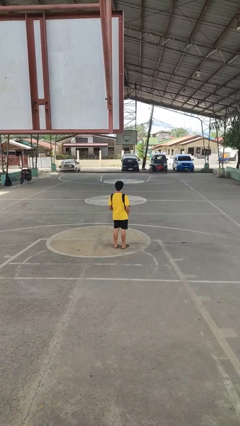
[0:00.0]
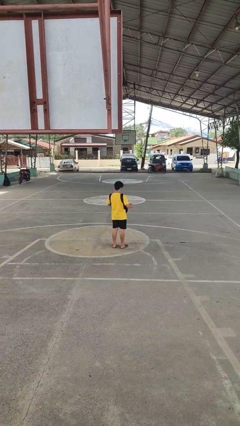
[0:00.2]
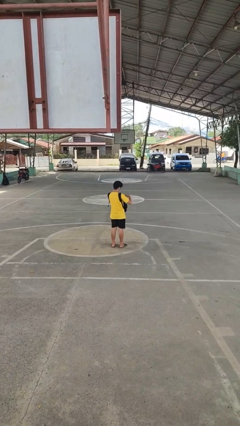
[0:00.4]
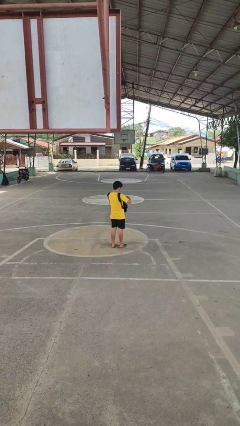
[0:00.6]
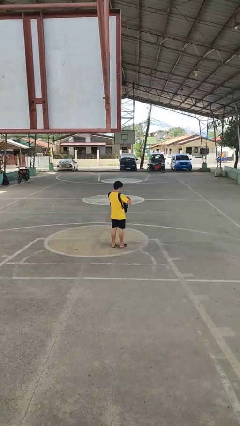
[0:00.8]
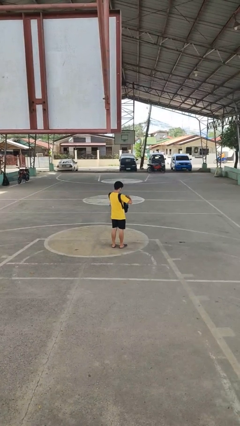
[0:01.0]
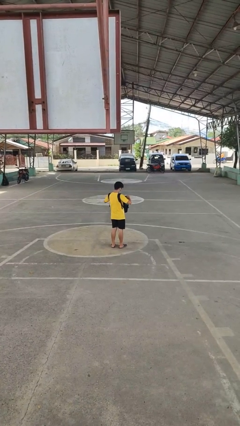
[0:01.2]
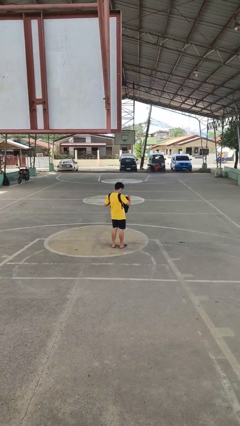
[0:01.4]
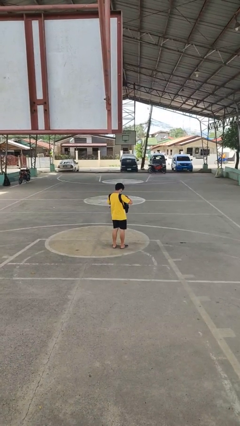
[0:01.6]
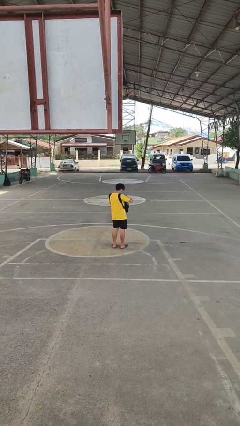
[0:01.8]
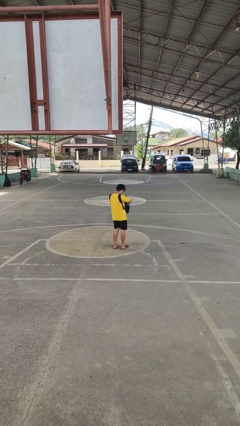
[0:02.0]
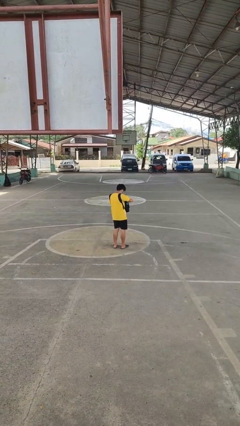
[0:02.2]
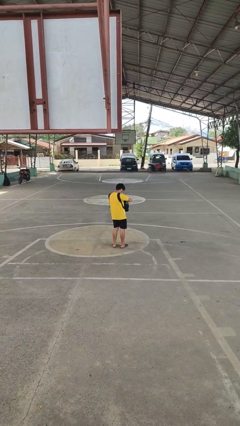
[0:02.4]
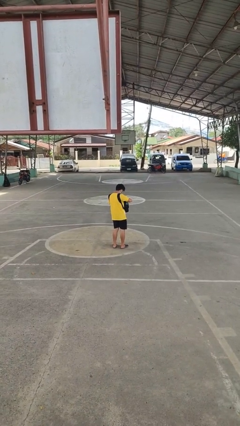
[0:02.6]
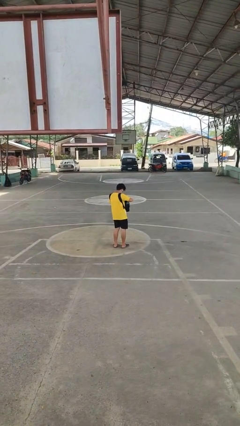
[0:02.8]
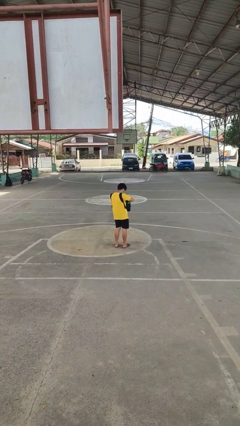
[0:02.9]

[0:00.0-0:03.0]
person searches in backpack

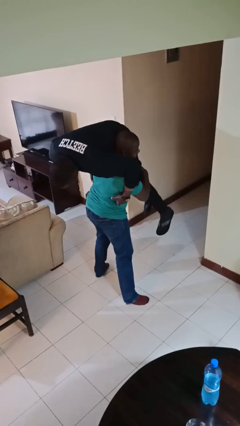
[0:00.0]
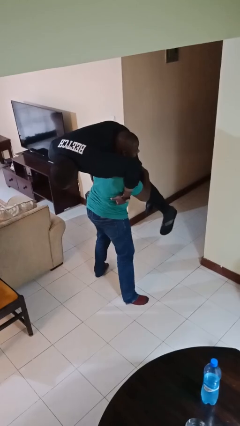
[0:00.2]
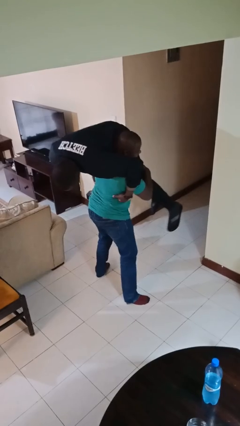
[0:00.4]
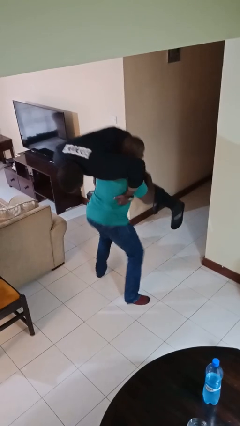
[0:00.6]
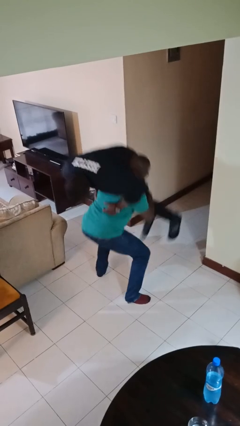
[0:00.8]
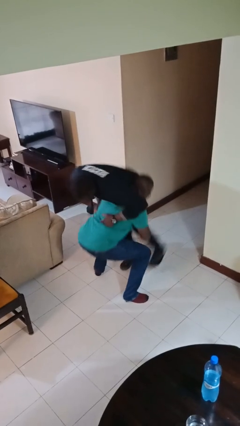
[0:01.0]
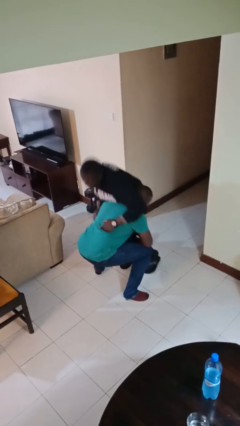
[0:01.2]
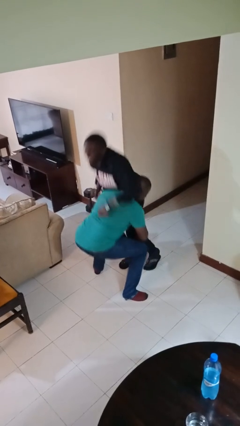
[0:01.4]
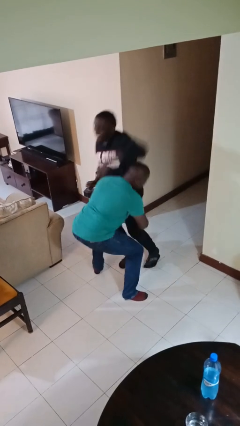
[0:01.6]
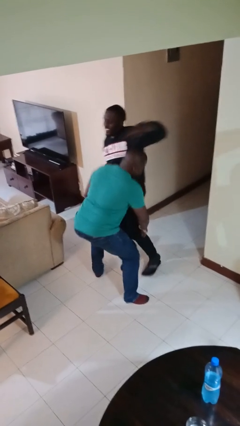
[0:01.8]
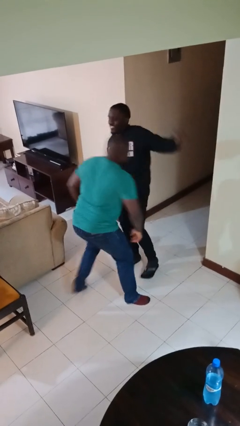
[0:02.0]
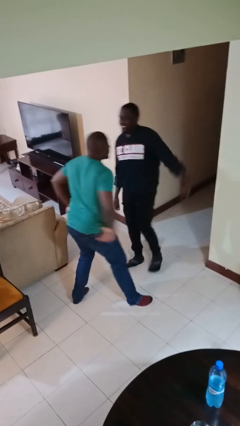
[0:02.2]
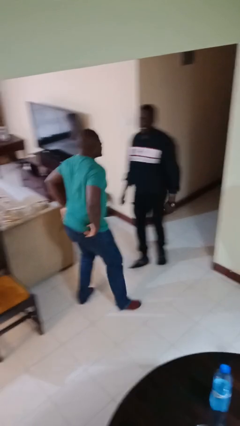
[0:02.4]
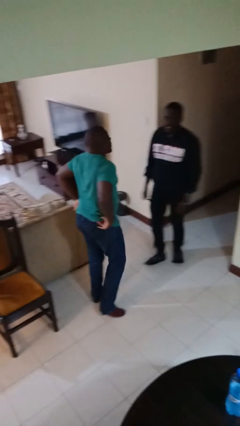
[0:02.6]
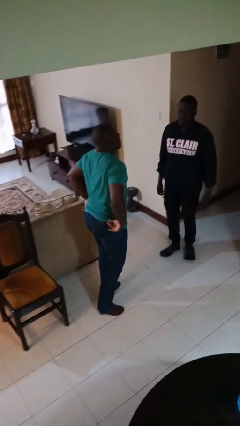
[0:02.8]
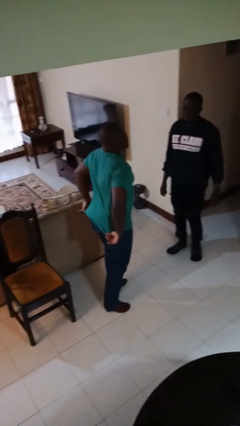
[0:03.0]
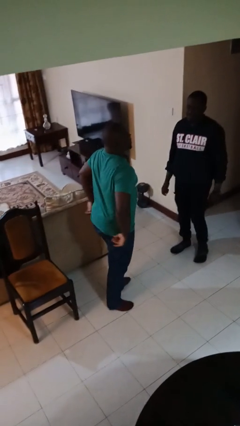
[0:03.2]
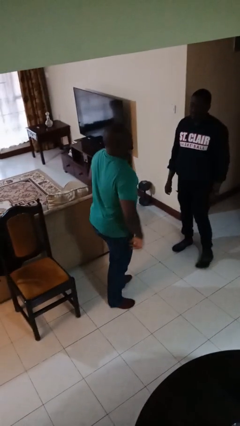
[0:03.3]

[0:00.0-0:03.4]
person puts down person

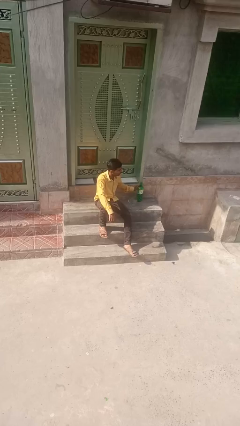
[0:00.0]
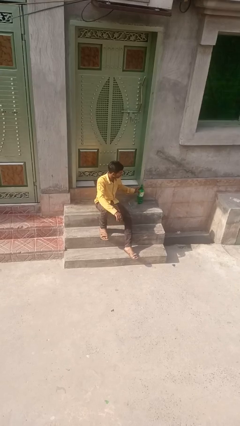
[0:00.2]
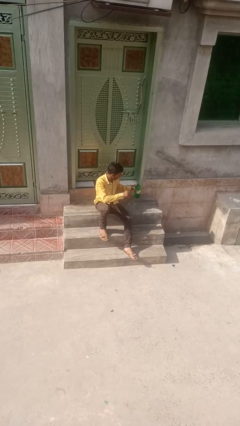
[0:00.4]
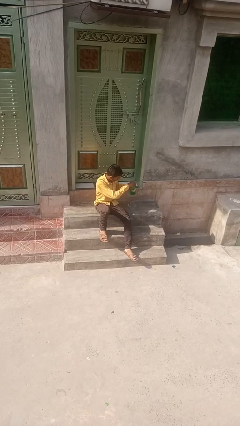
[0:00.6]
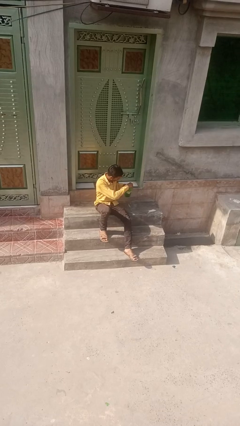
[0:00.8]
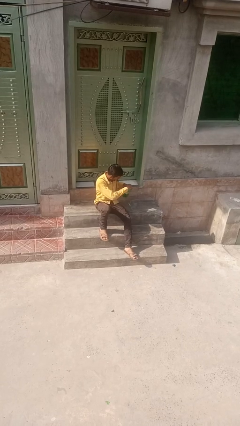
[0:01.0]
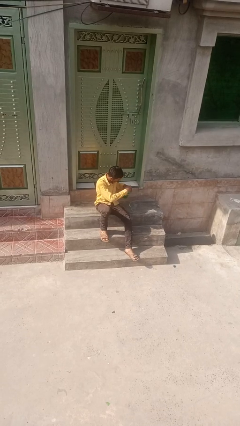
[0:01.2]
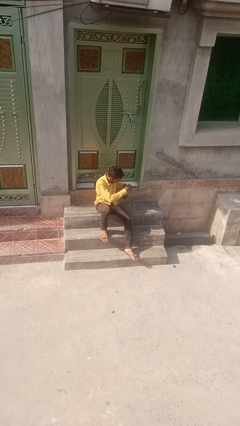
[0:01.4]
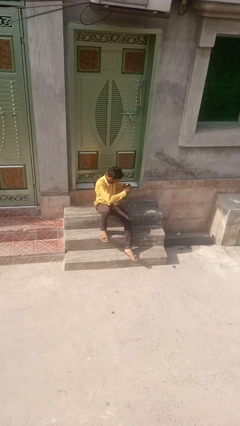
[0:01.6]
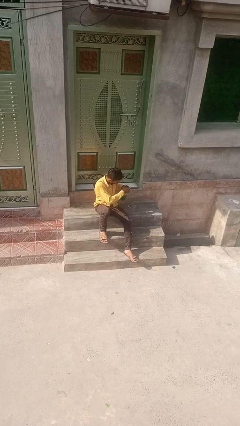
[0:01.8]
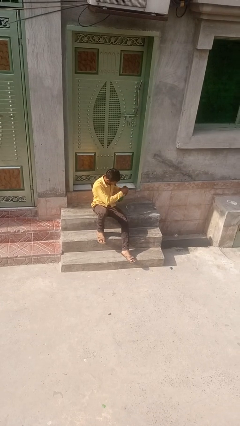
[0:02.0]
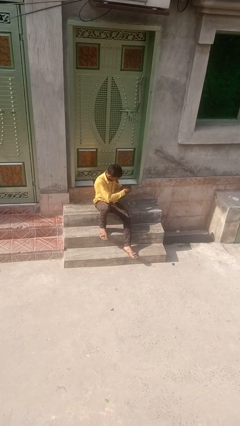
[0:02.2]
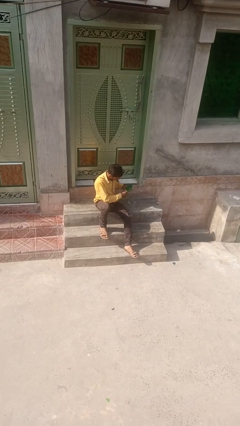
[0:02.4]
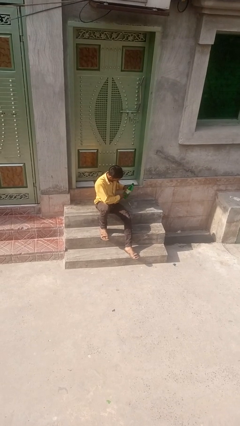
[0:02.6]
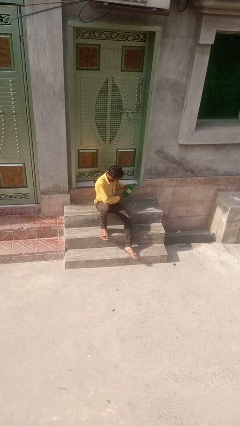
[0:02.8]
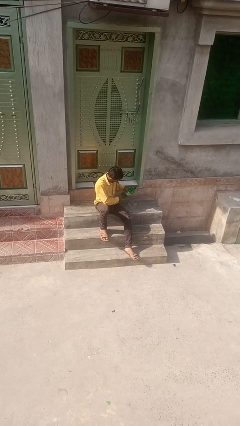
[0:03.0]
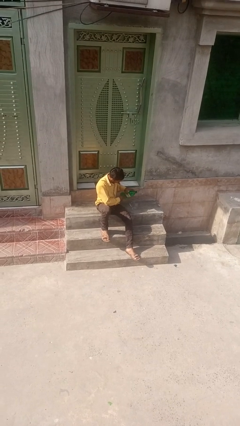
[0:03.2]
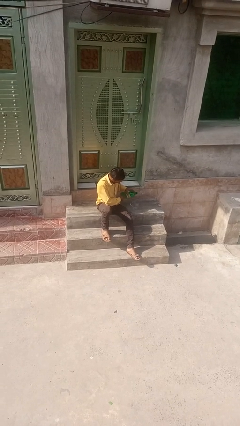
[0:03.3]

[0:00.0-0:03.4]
person unscrews lid from bottle

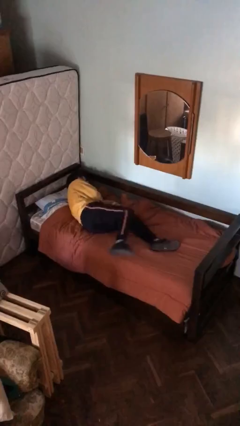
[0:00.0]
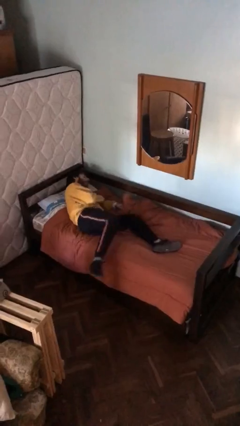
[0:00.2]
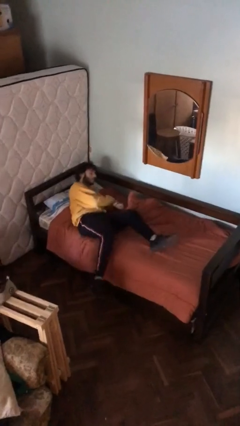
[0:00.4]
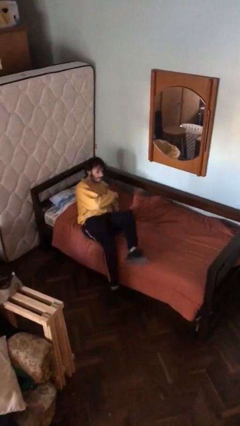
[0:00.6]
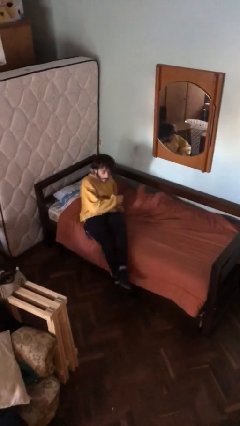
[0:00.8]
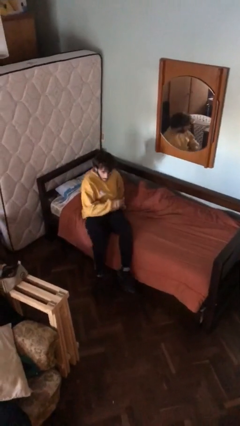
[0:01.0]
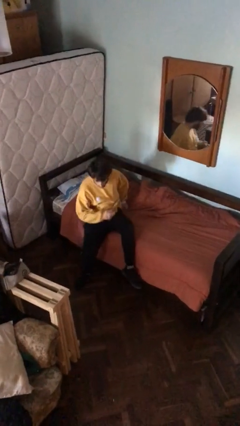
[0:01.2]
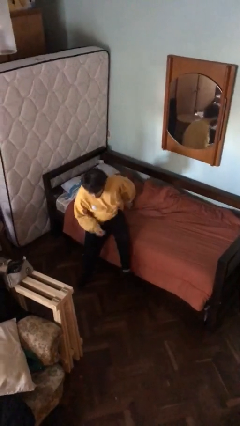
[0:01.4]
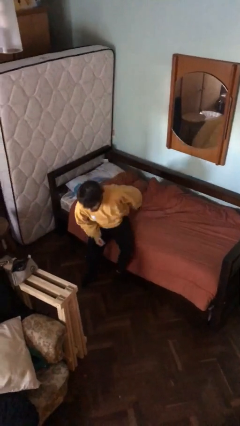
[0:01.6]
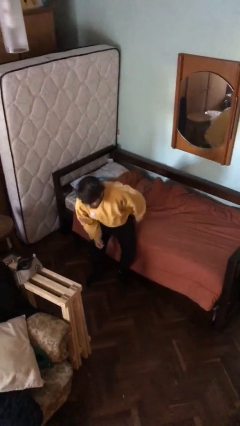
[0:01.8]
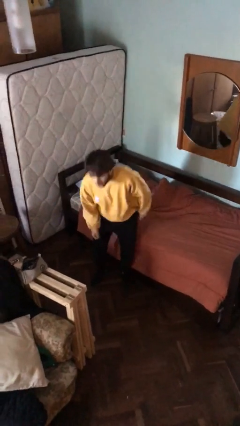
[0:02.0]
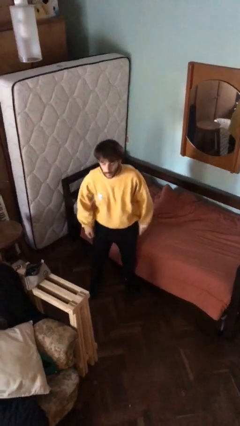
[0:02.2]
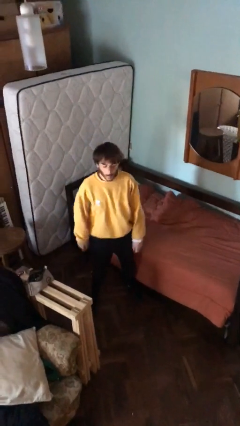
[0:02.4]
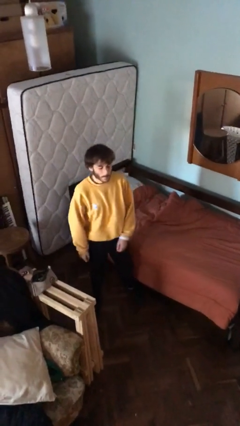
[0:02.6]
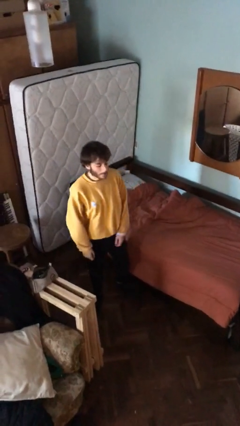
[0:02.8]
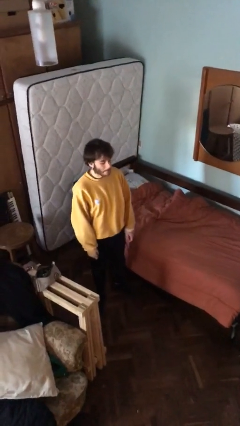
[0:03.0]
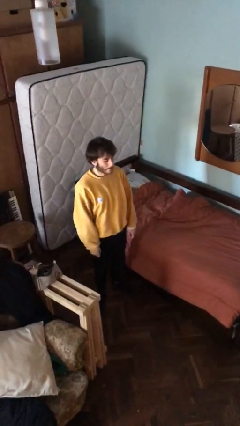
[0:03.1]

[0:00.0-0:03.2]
person stands up

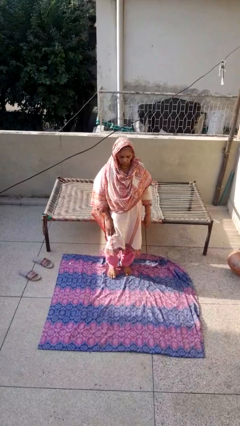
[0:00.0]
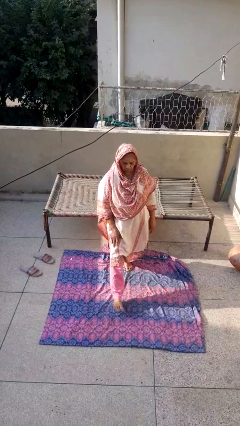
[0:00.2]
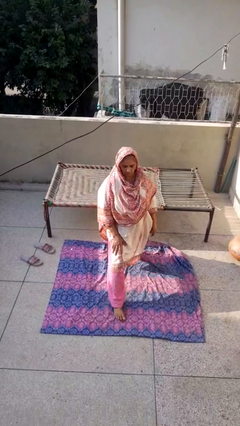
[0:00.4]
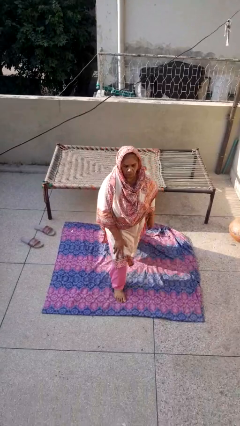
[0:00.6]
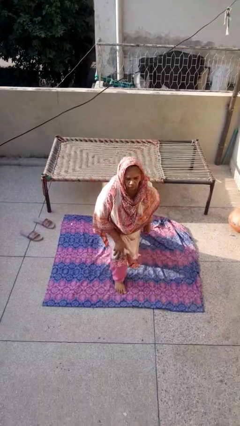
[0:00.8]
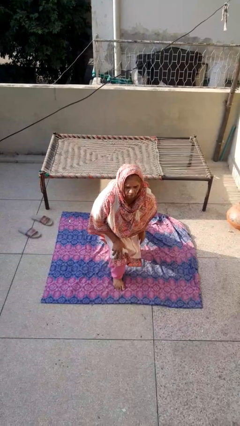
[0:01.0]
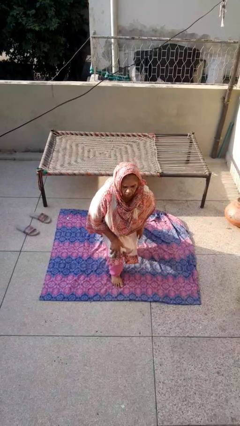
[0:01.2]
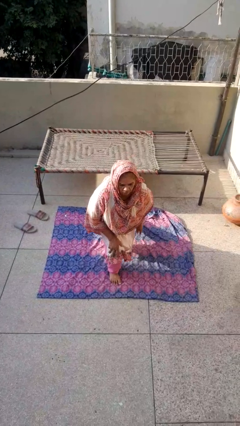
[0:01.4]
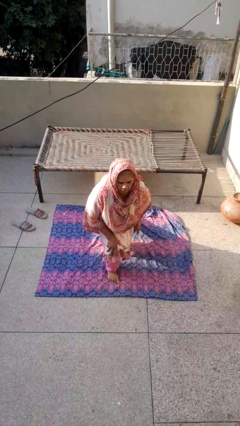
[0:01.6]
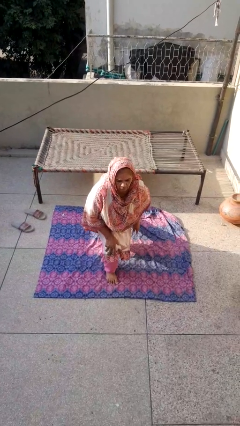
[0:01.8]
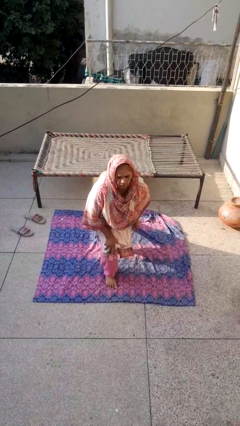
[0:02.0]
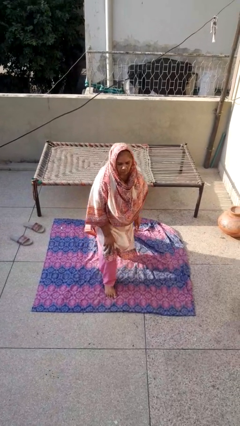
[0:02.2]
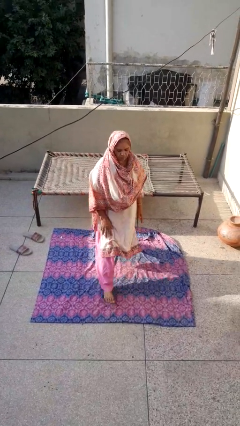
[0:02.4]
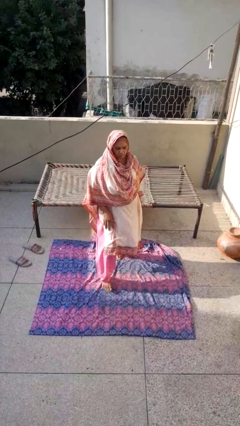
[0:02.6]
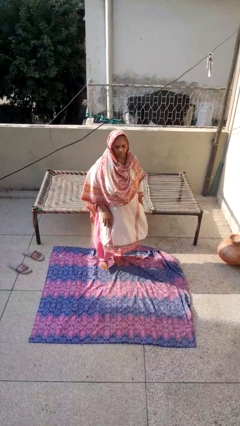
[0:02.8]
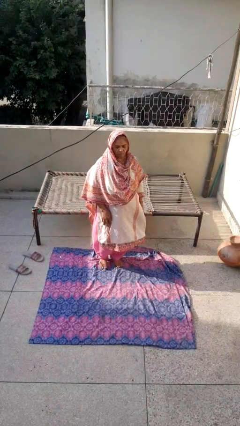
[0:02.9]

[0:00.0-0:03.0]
person exercises with lunges

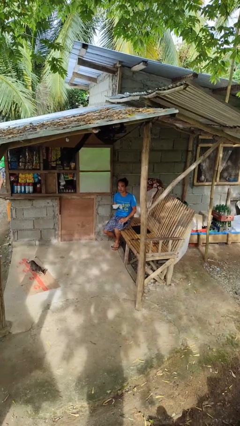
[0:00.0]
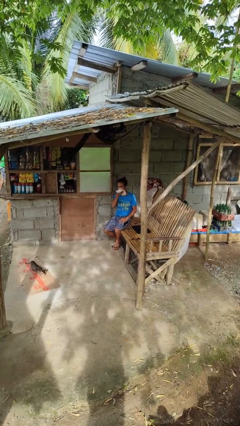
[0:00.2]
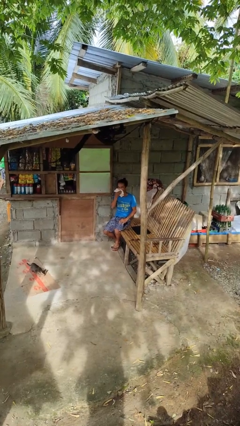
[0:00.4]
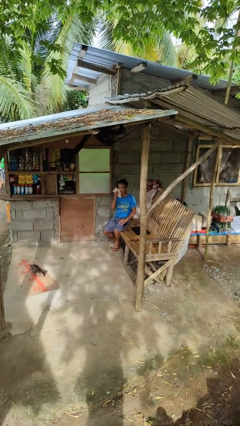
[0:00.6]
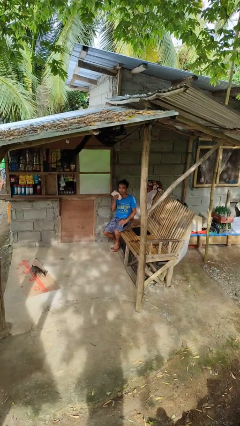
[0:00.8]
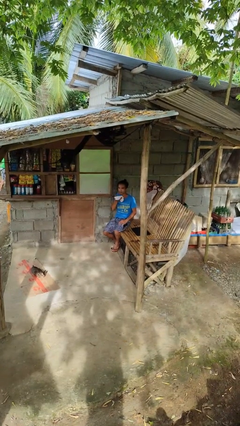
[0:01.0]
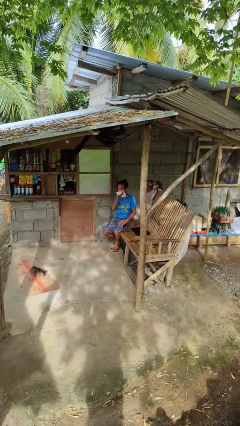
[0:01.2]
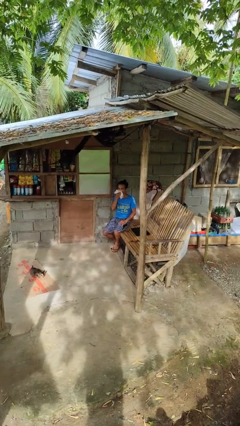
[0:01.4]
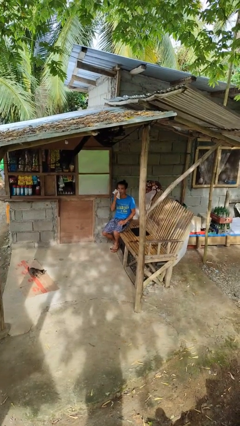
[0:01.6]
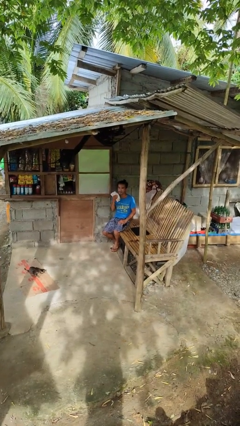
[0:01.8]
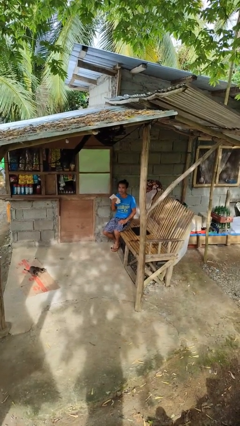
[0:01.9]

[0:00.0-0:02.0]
person wipes mouth with napkin
